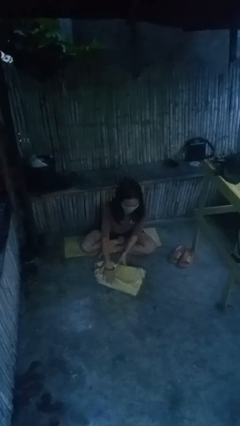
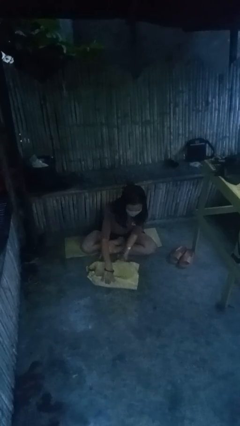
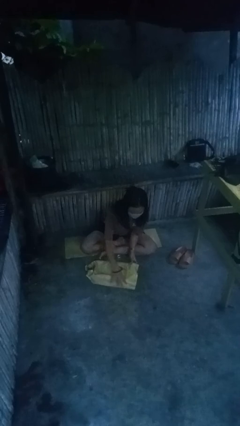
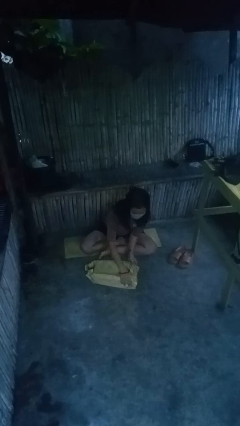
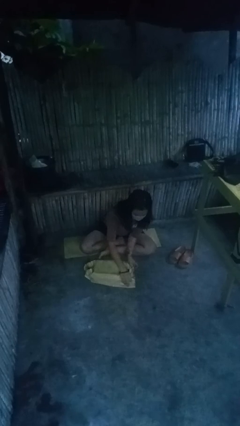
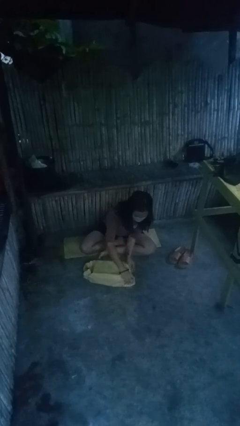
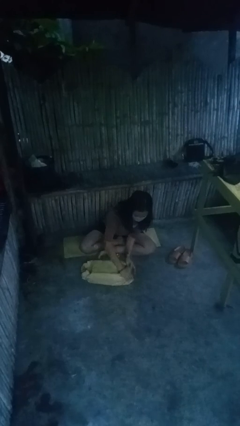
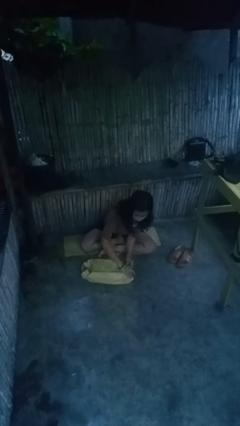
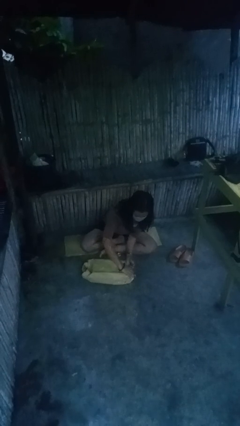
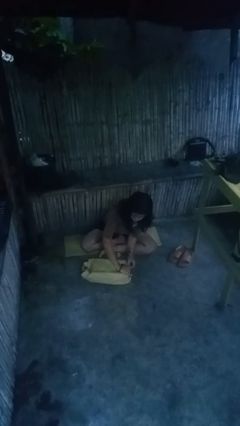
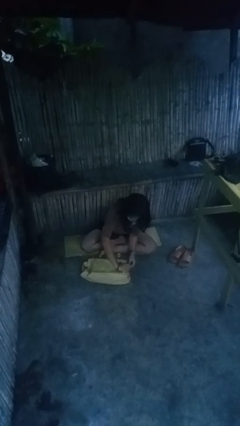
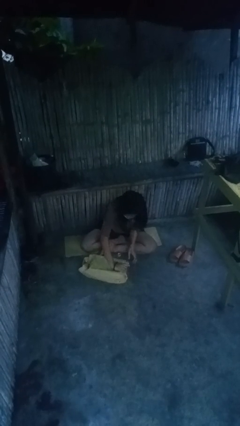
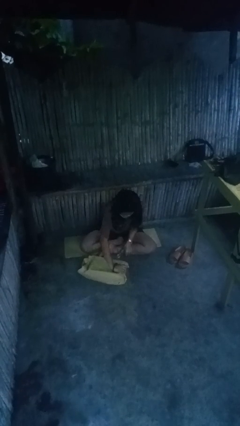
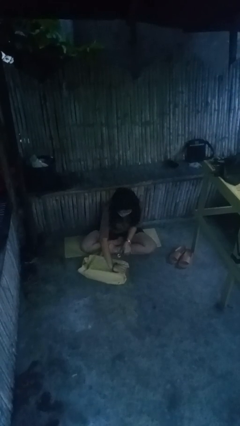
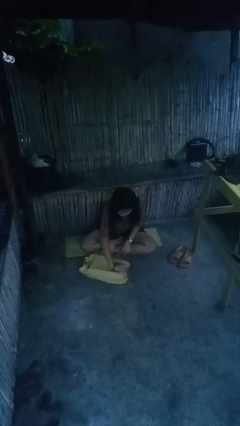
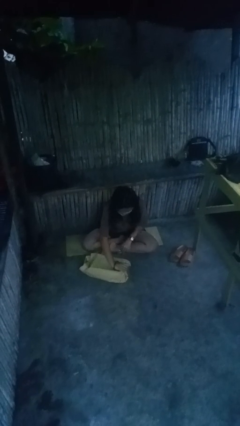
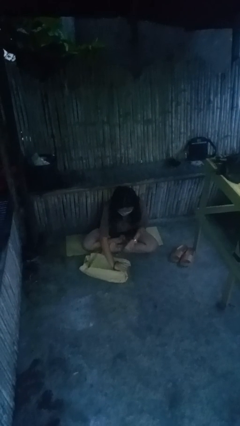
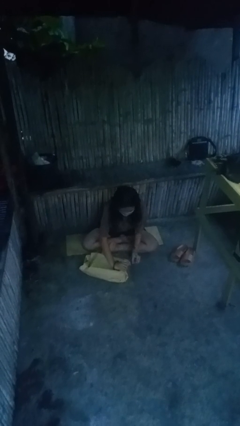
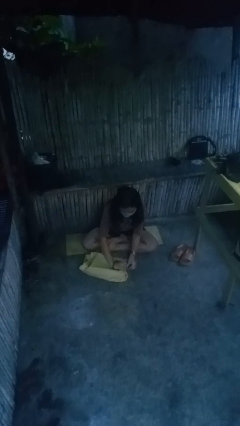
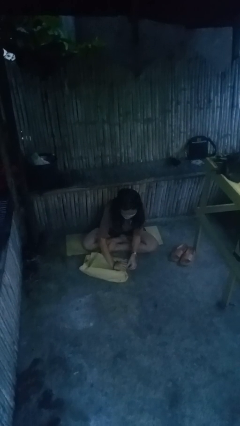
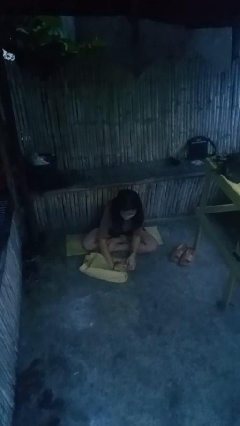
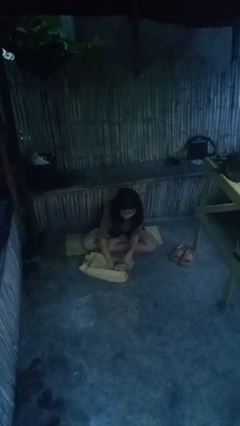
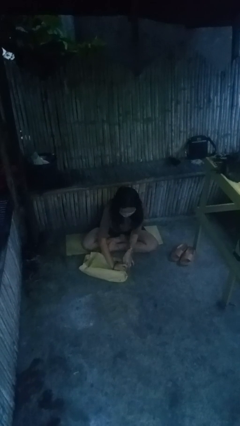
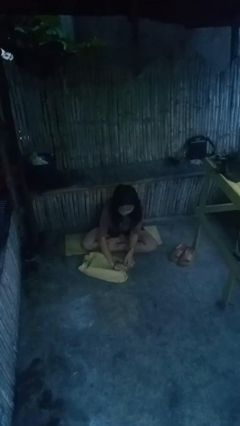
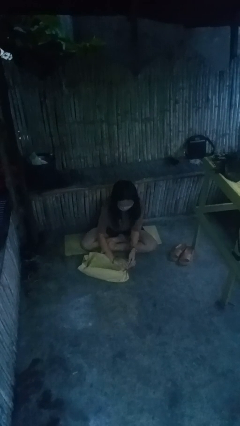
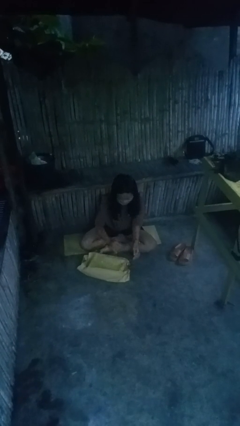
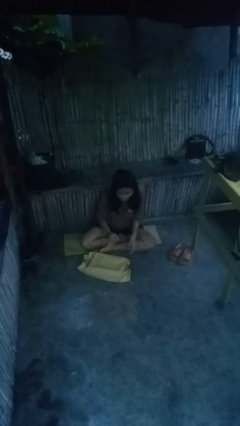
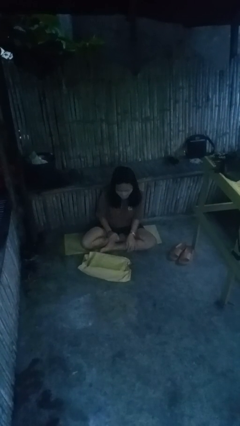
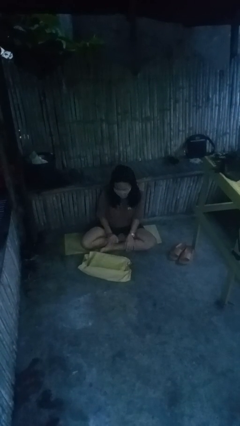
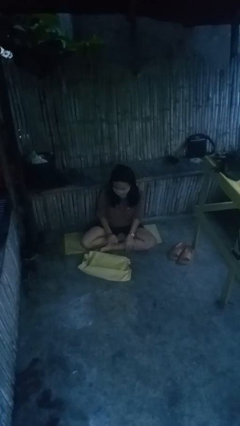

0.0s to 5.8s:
person wraps box

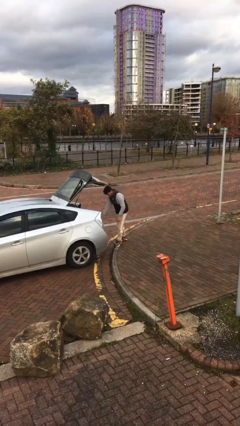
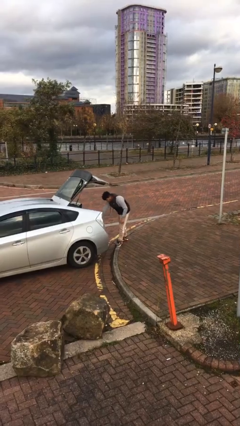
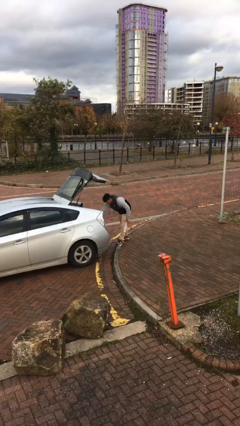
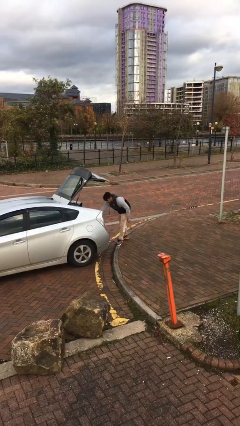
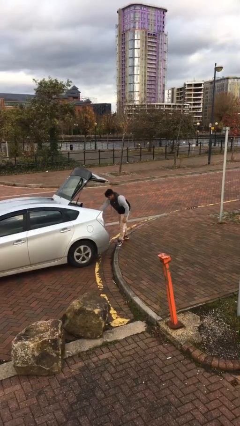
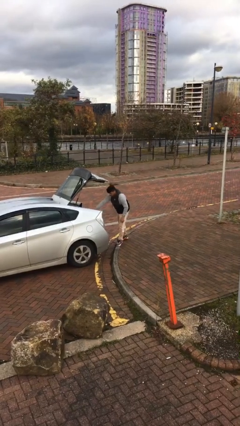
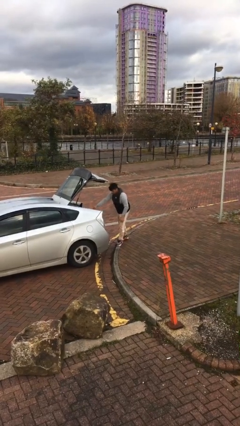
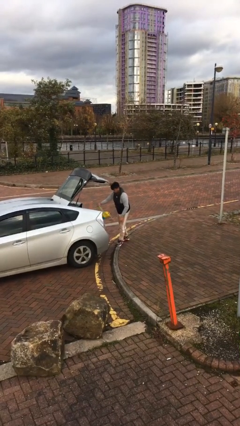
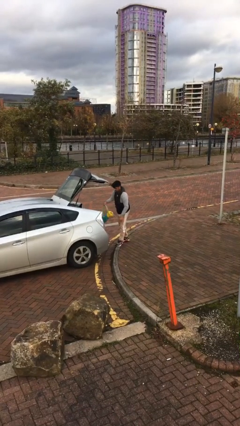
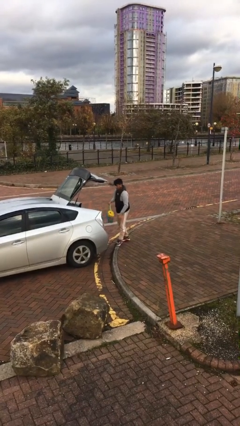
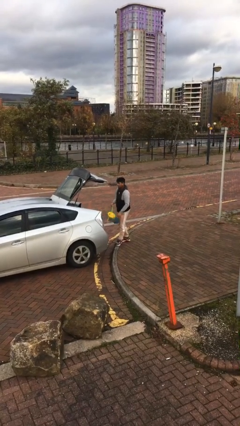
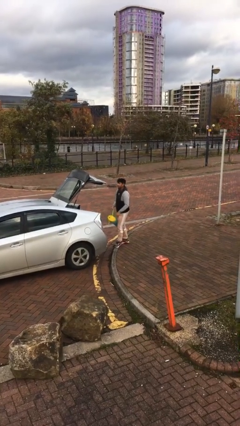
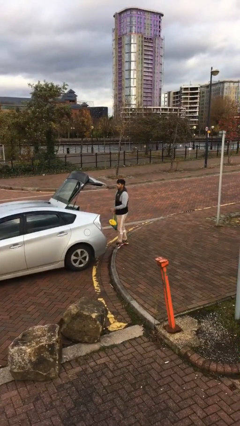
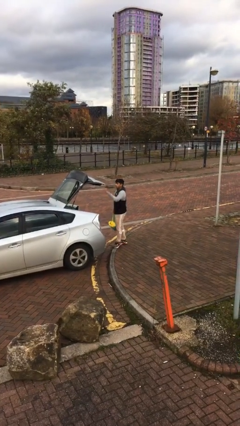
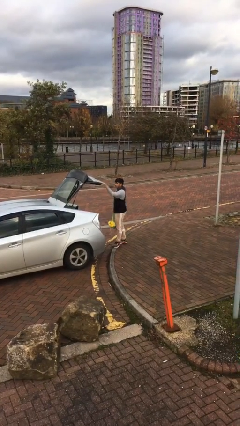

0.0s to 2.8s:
person unloads car

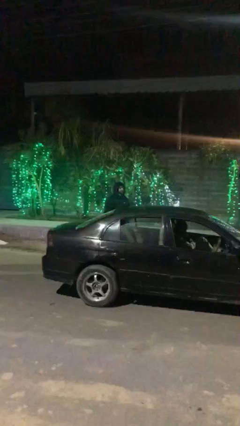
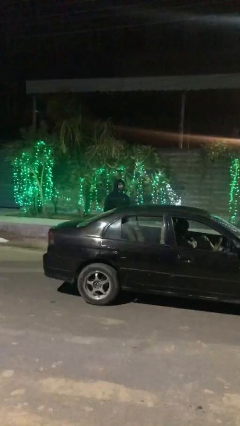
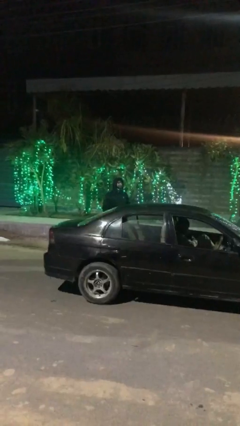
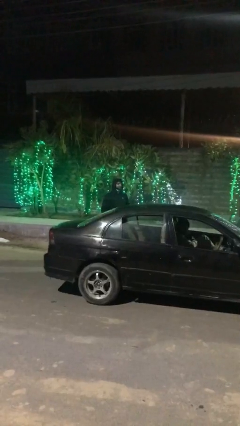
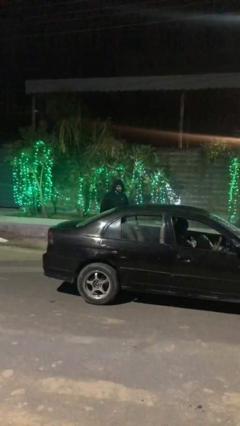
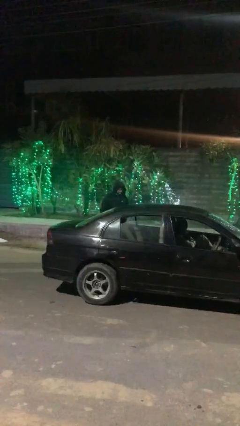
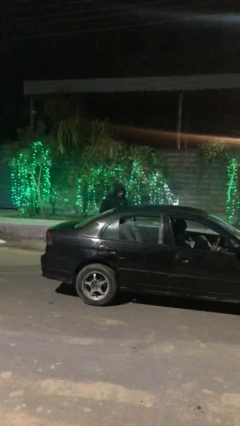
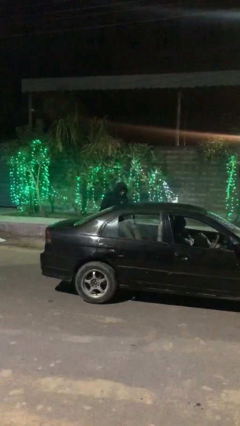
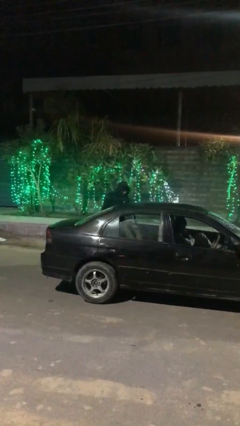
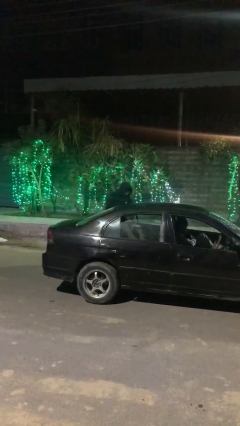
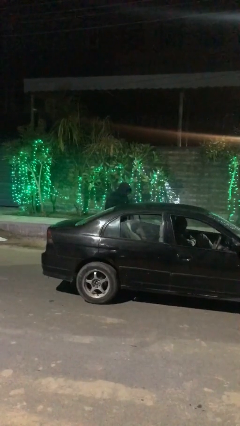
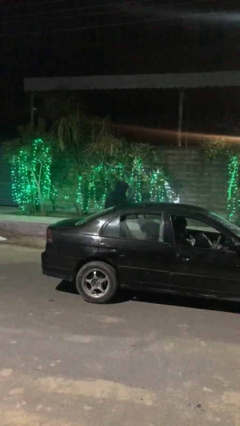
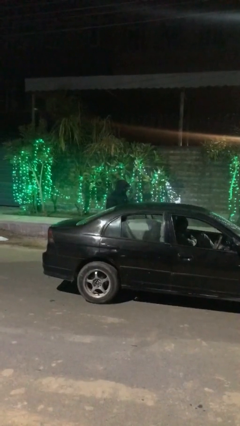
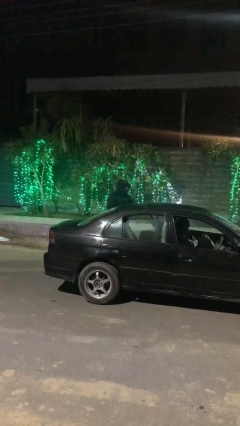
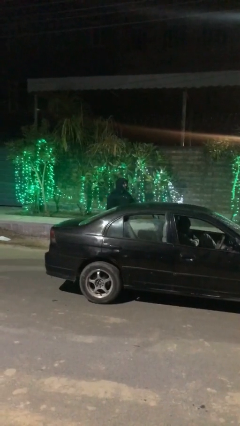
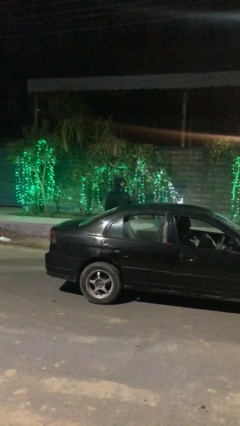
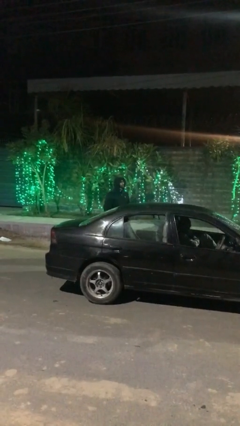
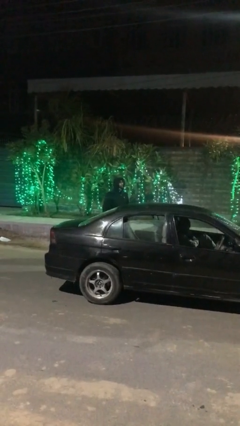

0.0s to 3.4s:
person opens car door

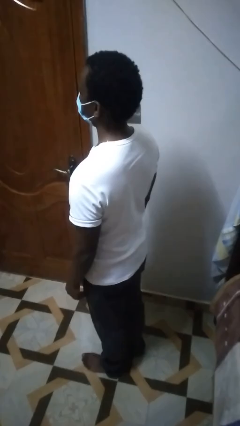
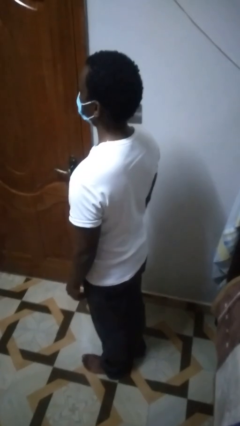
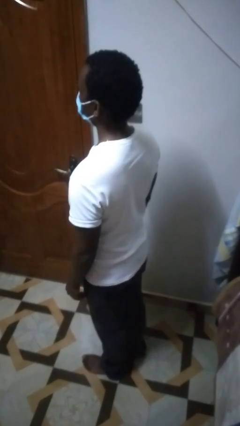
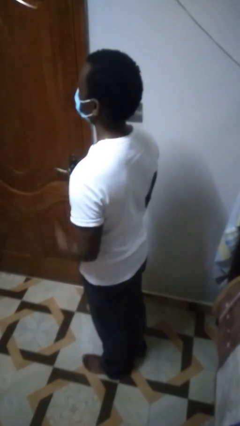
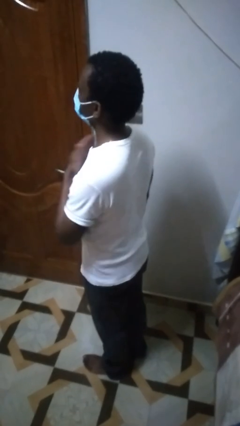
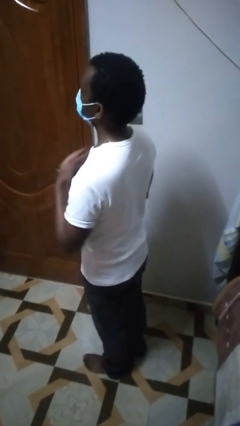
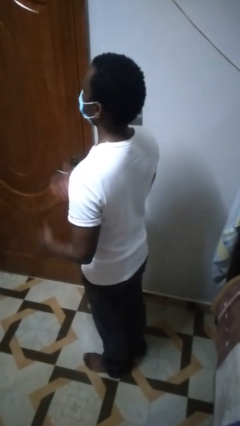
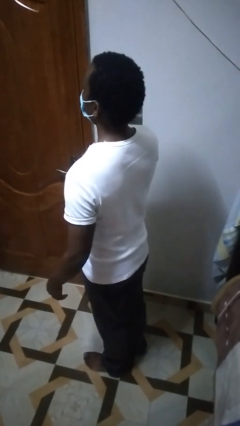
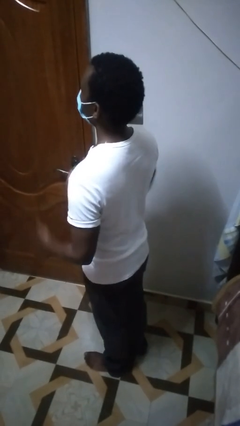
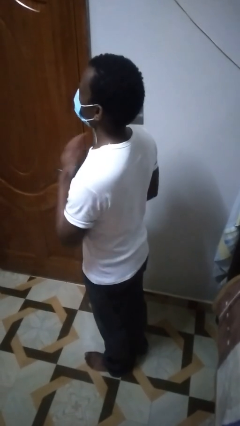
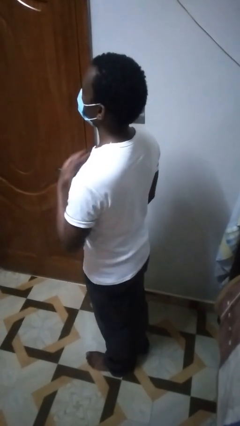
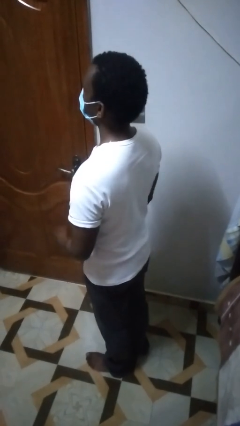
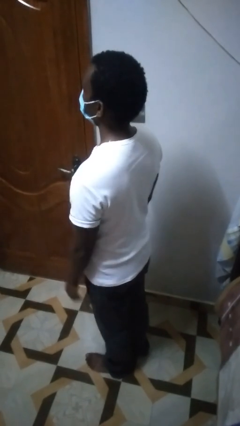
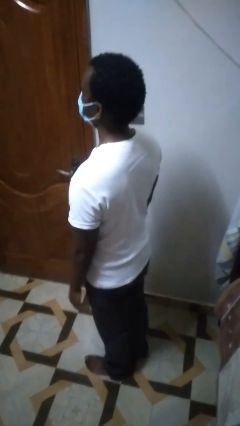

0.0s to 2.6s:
person drums on chest

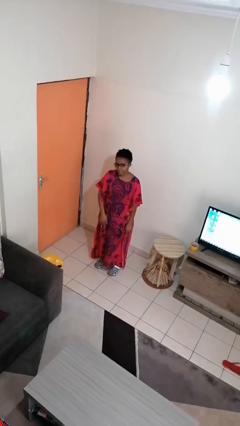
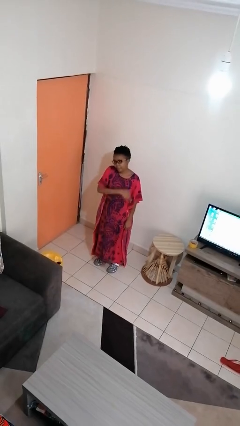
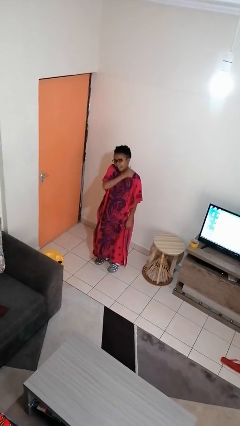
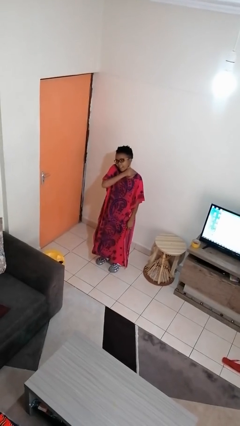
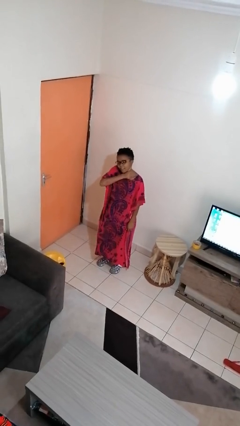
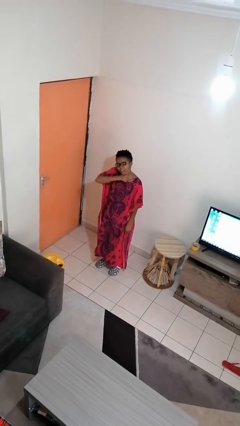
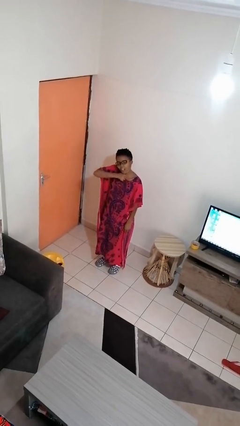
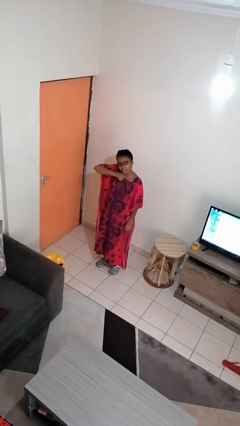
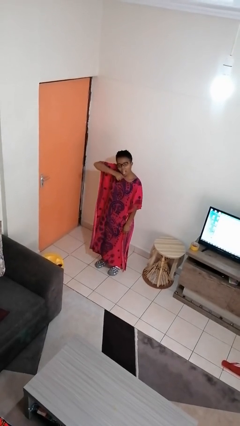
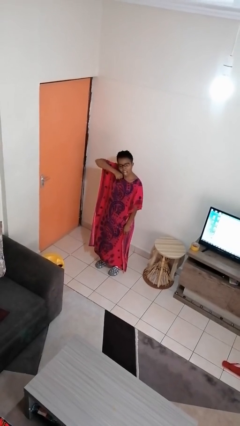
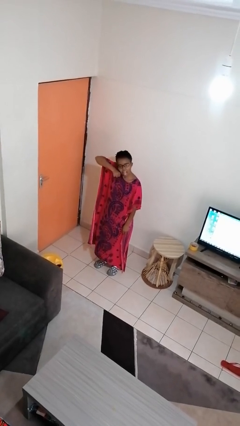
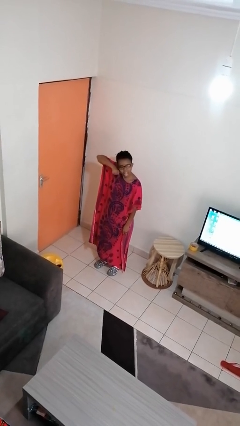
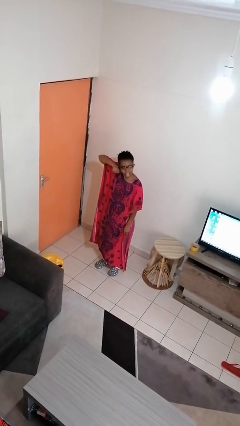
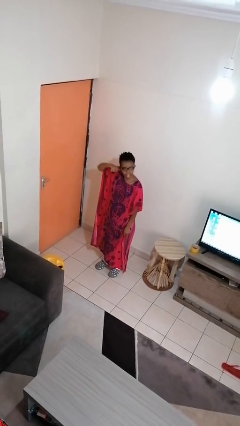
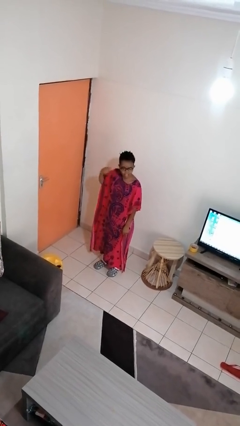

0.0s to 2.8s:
person gestures cut
